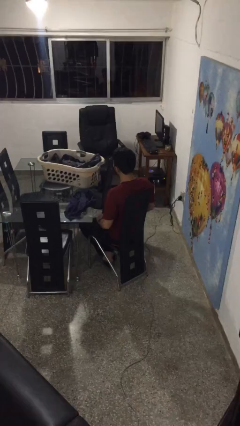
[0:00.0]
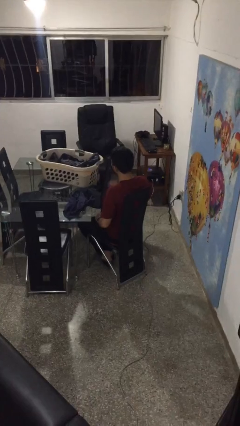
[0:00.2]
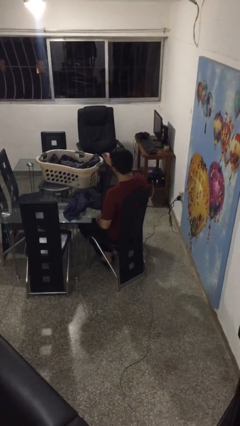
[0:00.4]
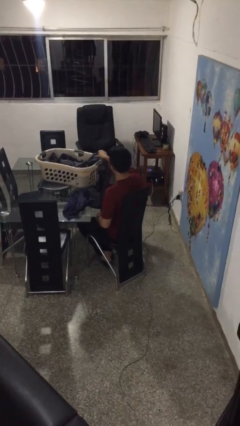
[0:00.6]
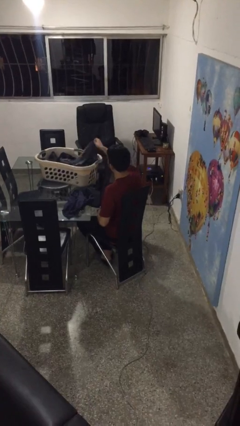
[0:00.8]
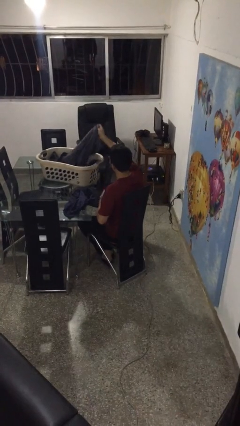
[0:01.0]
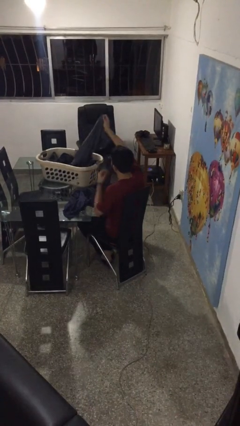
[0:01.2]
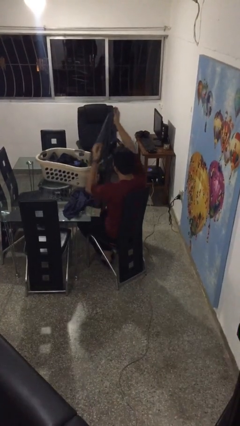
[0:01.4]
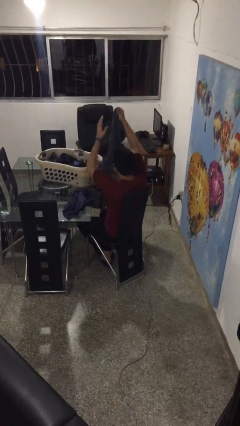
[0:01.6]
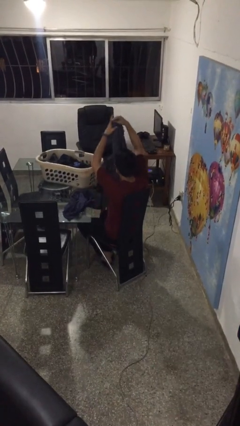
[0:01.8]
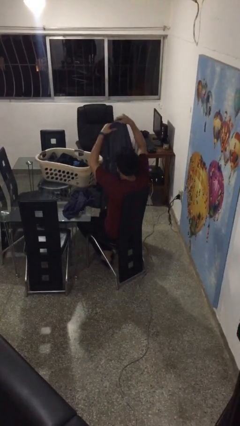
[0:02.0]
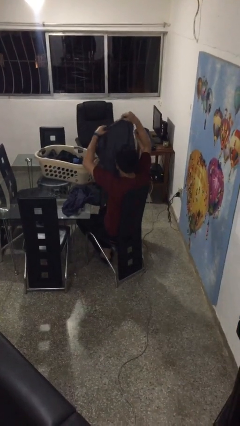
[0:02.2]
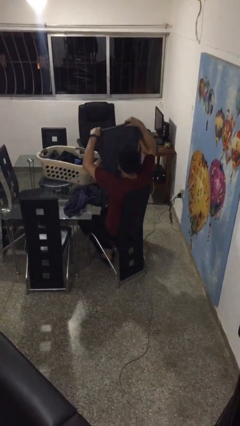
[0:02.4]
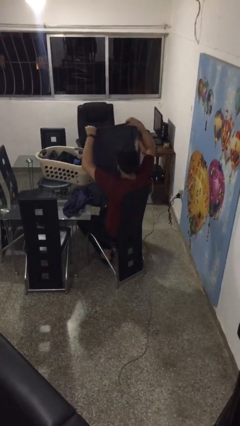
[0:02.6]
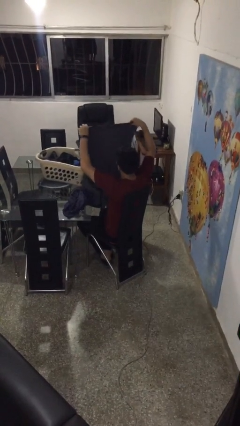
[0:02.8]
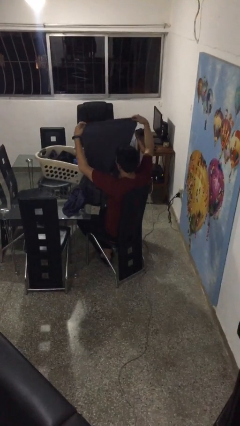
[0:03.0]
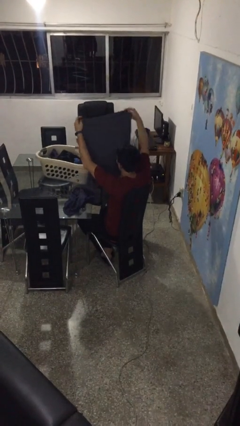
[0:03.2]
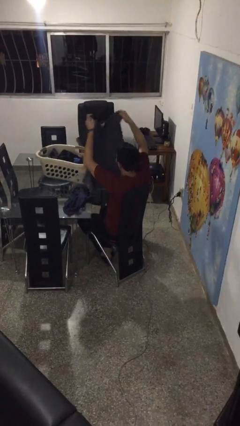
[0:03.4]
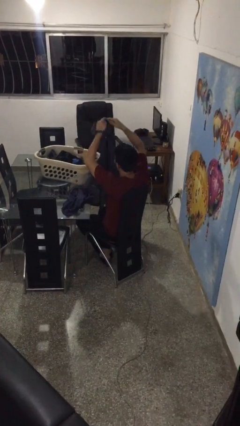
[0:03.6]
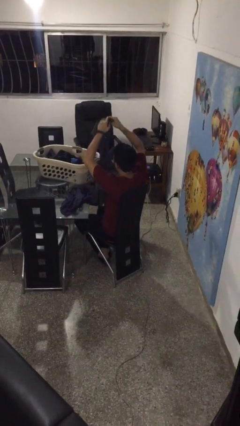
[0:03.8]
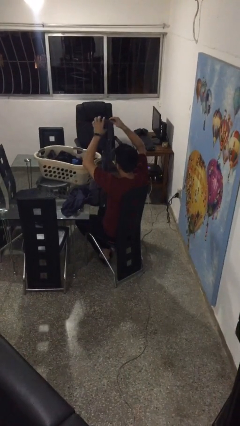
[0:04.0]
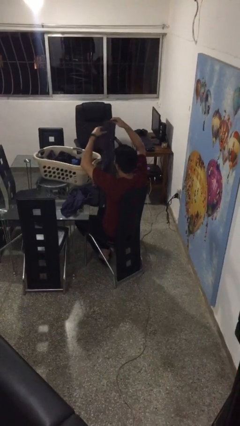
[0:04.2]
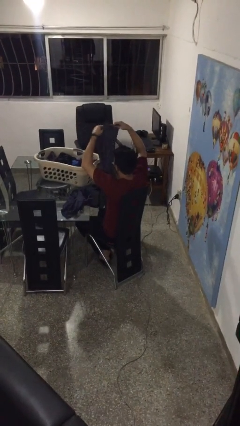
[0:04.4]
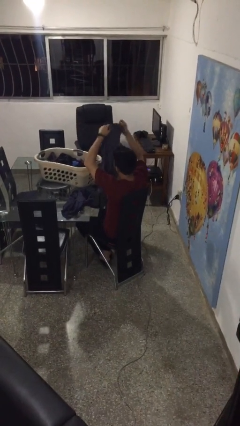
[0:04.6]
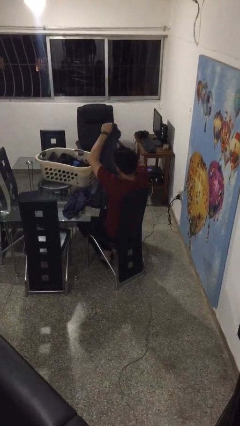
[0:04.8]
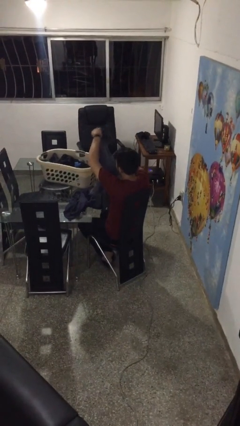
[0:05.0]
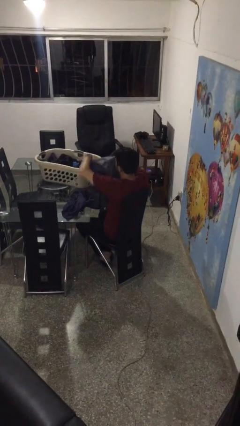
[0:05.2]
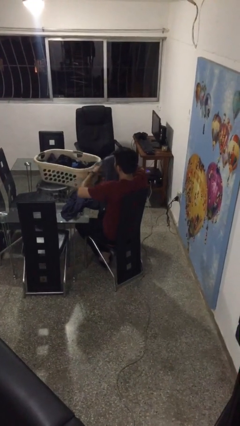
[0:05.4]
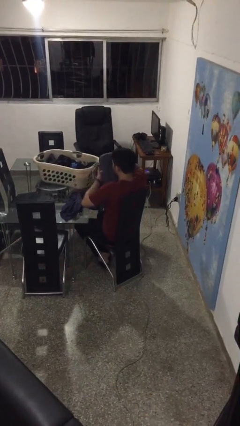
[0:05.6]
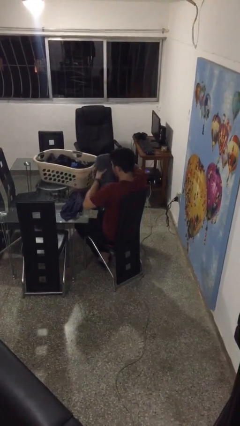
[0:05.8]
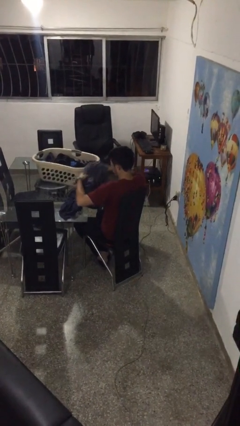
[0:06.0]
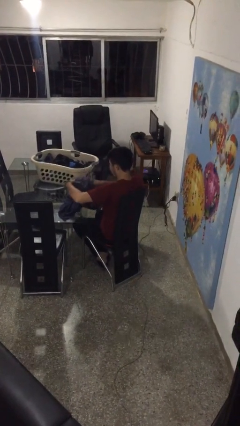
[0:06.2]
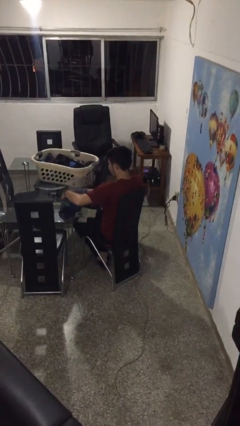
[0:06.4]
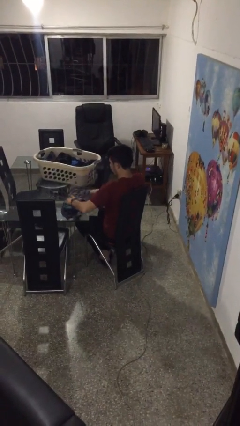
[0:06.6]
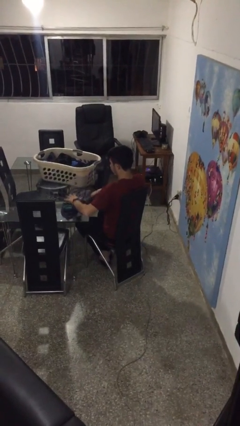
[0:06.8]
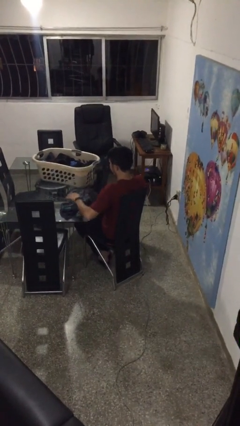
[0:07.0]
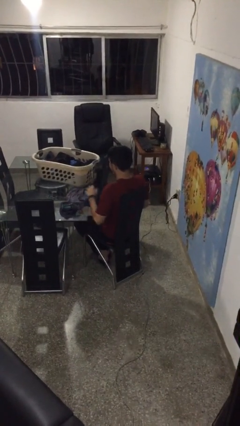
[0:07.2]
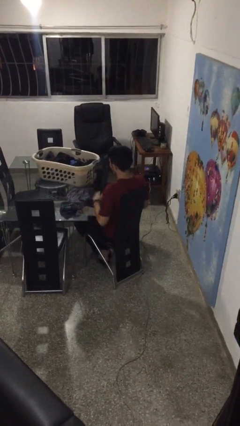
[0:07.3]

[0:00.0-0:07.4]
person folds shirt

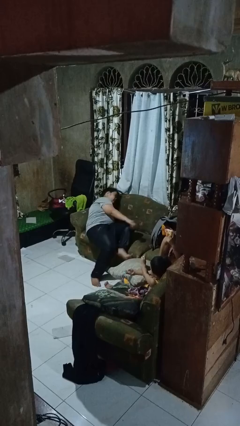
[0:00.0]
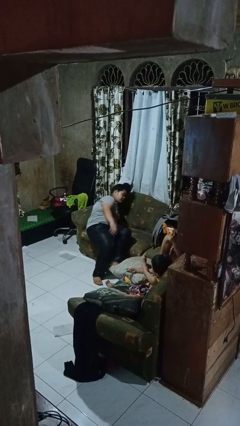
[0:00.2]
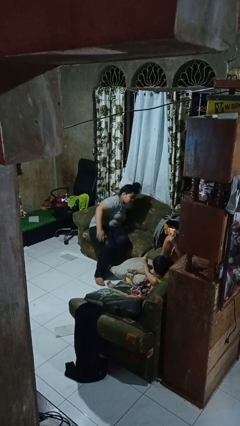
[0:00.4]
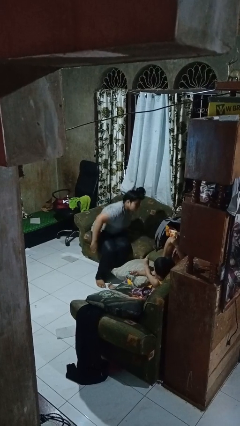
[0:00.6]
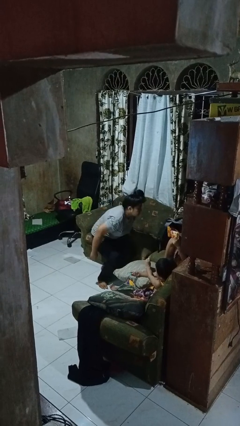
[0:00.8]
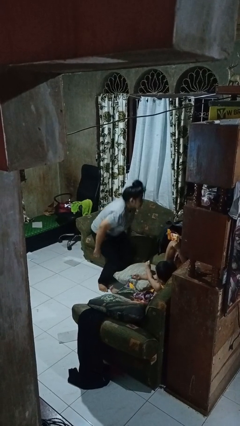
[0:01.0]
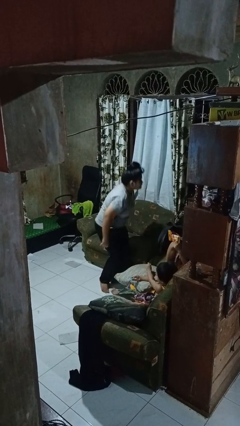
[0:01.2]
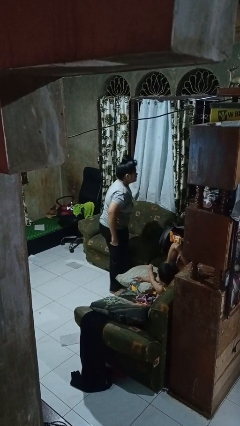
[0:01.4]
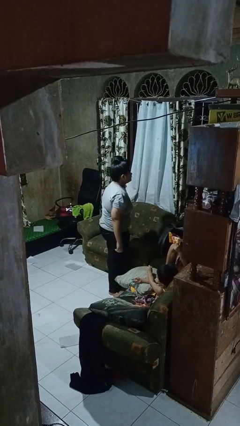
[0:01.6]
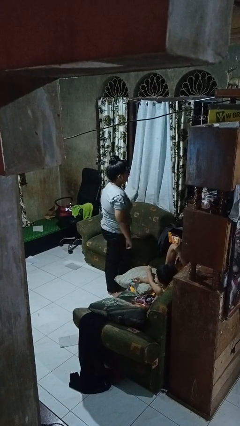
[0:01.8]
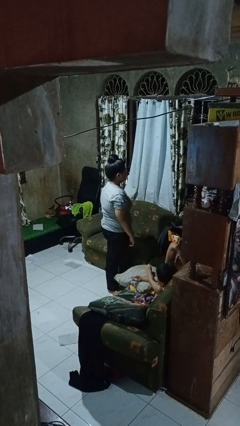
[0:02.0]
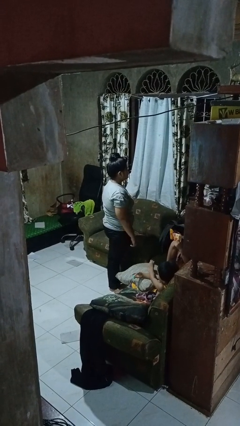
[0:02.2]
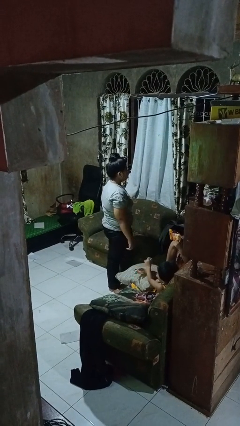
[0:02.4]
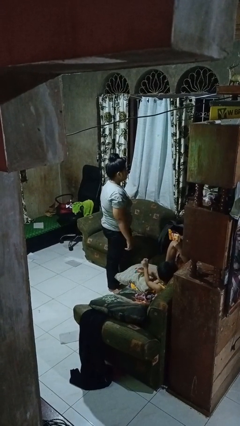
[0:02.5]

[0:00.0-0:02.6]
person stands up

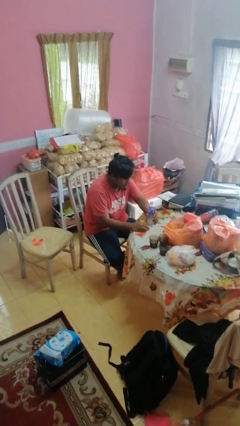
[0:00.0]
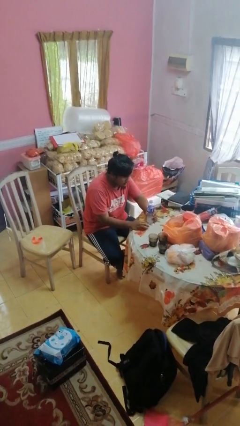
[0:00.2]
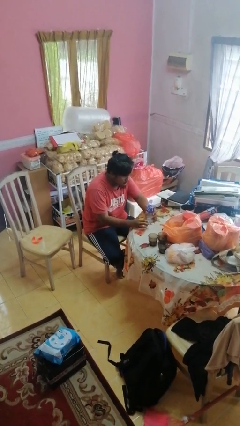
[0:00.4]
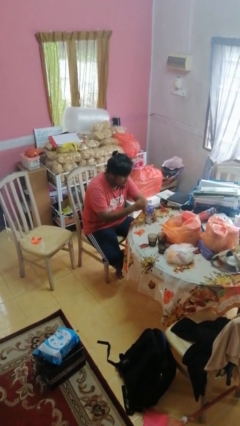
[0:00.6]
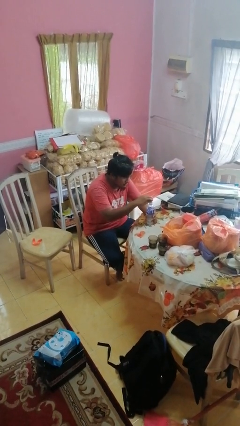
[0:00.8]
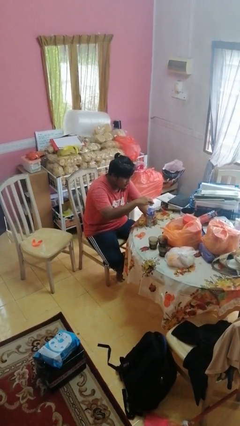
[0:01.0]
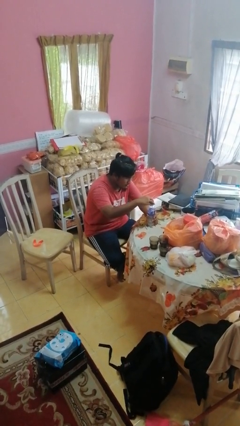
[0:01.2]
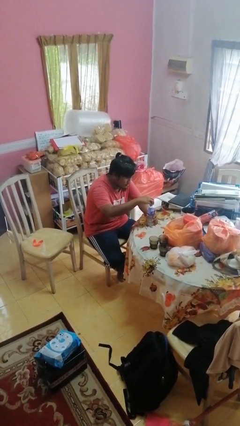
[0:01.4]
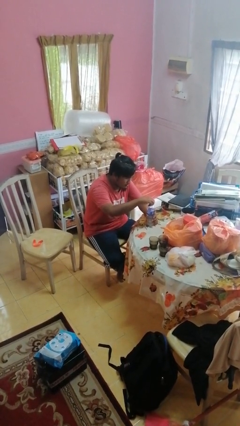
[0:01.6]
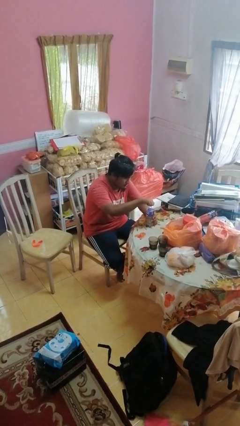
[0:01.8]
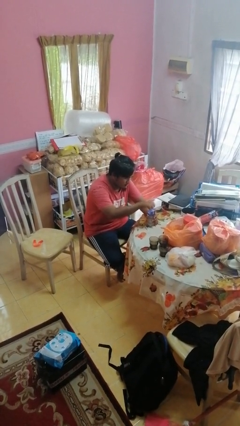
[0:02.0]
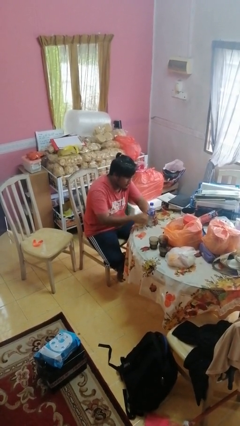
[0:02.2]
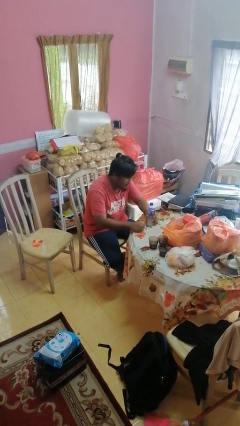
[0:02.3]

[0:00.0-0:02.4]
person screws lid to bottle

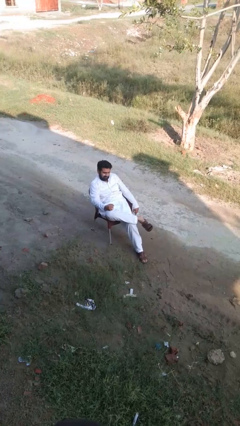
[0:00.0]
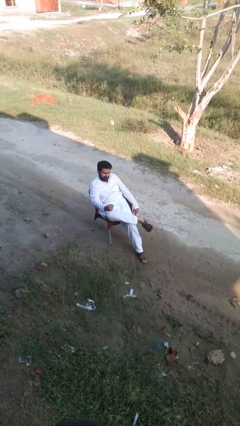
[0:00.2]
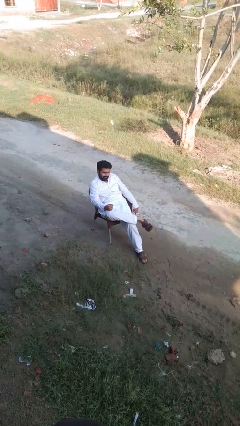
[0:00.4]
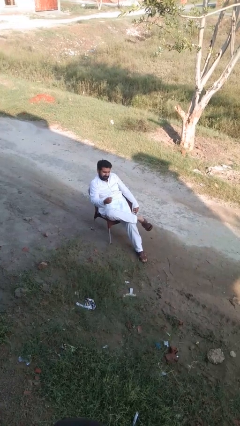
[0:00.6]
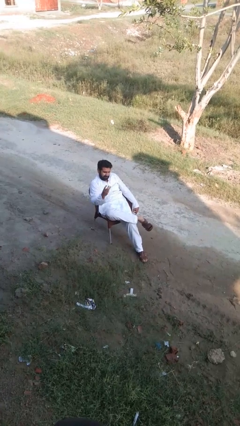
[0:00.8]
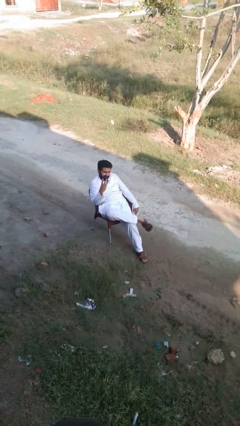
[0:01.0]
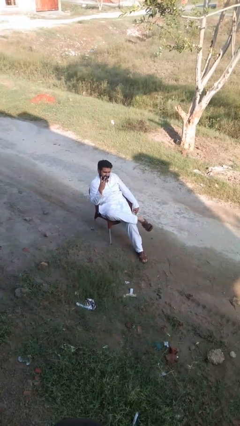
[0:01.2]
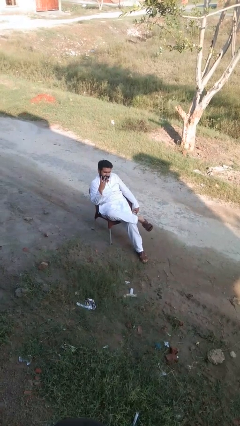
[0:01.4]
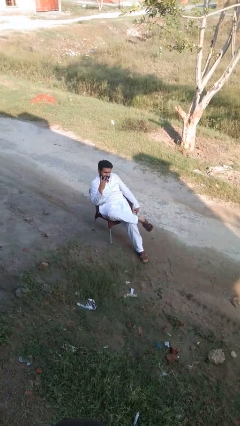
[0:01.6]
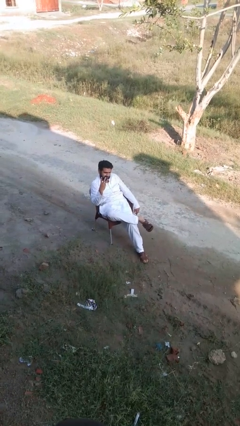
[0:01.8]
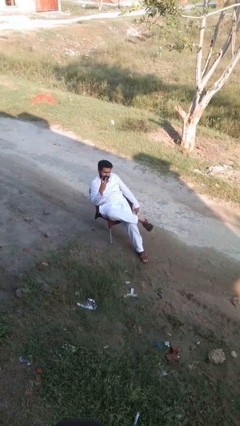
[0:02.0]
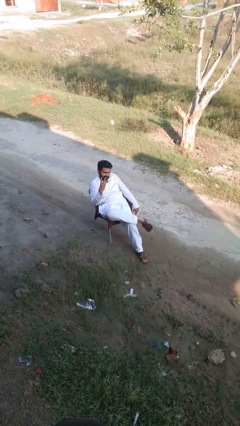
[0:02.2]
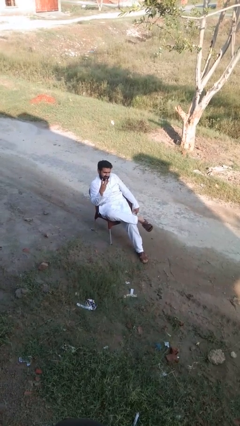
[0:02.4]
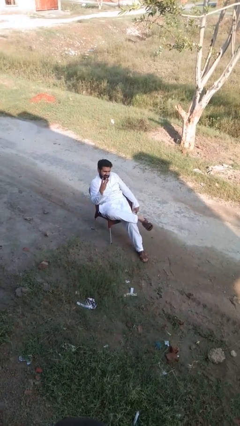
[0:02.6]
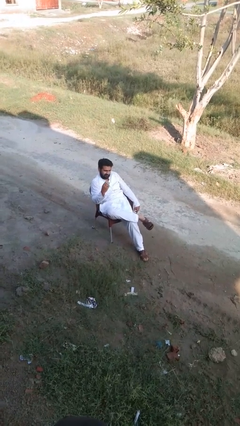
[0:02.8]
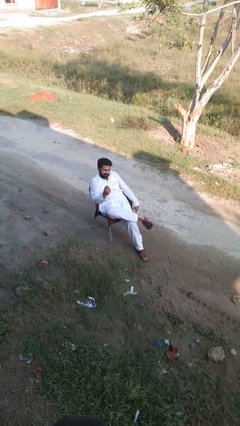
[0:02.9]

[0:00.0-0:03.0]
person gestures number three

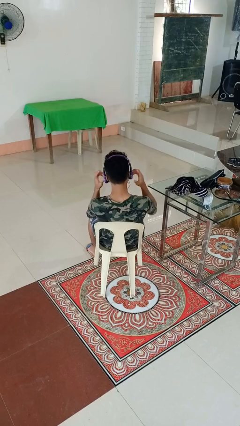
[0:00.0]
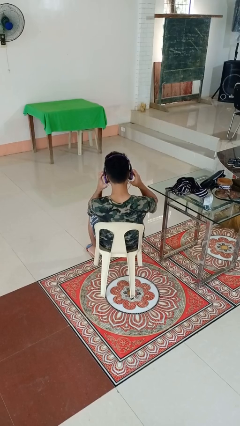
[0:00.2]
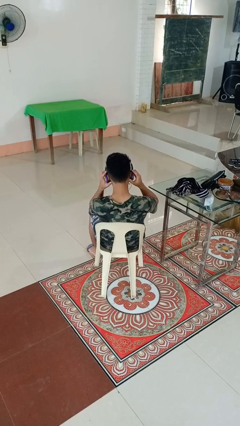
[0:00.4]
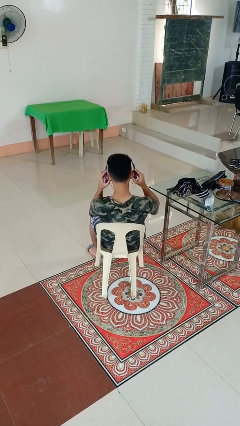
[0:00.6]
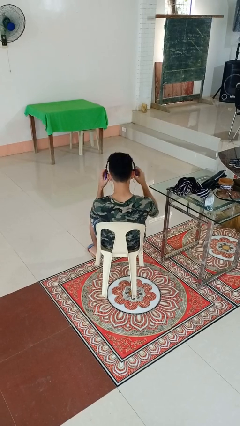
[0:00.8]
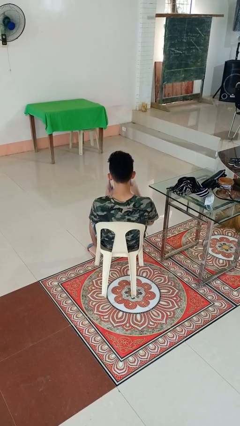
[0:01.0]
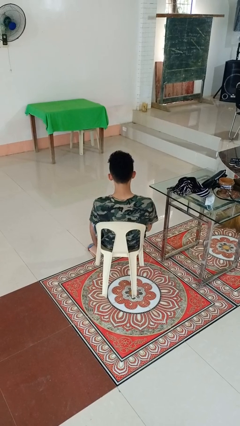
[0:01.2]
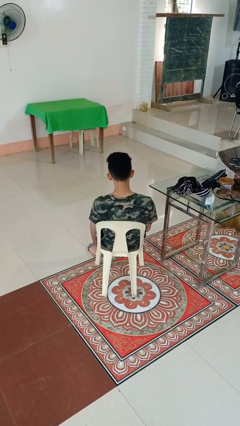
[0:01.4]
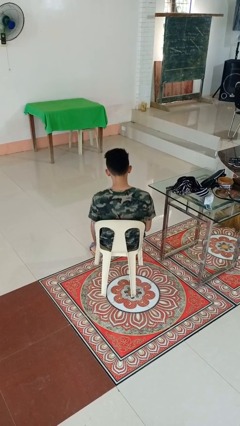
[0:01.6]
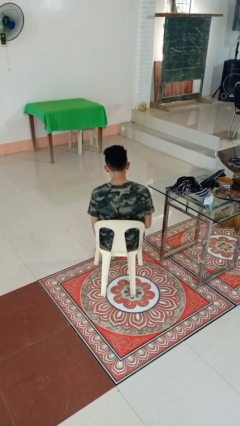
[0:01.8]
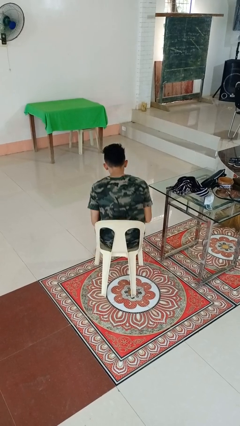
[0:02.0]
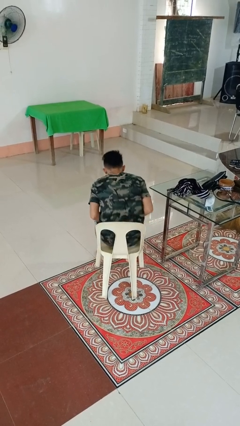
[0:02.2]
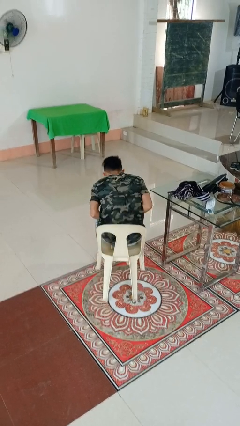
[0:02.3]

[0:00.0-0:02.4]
person takes off headphones
